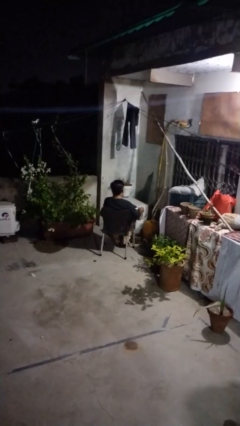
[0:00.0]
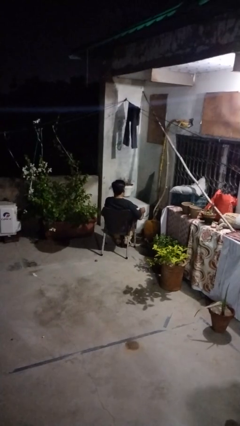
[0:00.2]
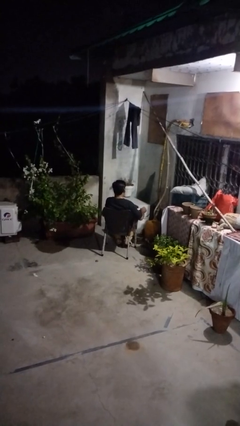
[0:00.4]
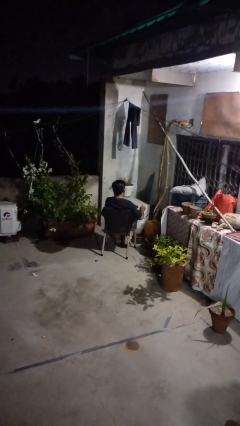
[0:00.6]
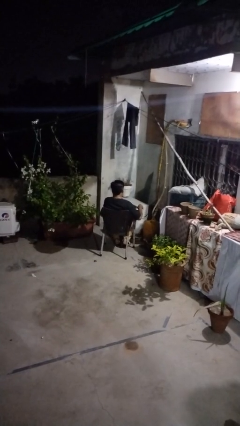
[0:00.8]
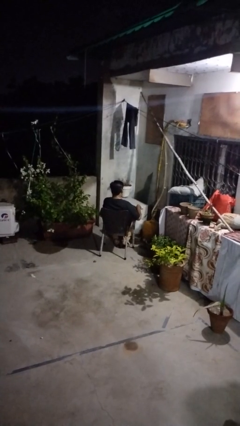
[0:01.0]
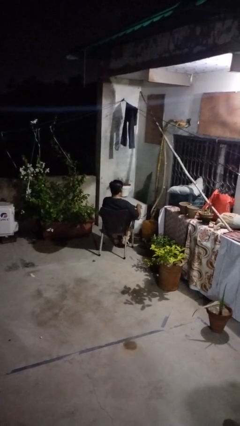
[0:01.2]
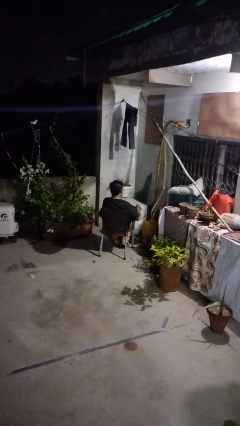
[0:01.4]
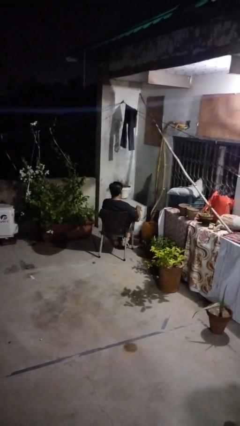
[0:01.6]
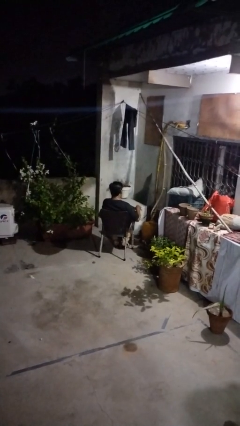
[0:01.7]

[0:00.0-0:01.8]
person stirs mug

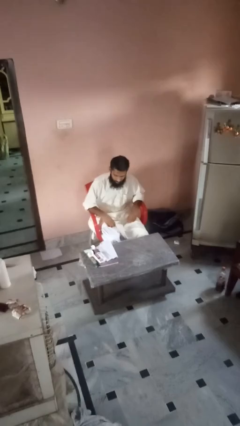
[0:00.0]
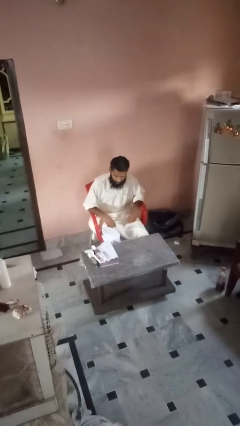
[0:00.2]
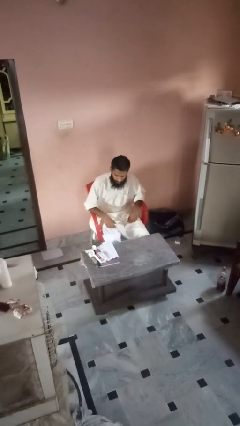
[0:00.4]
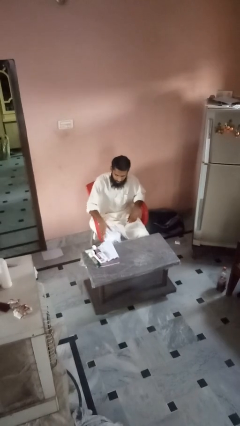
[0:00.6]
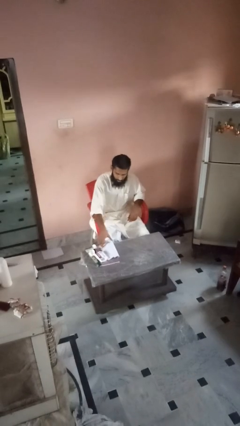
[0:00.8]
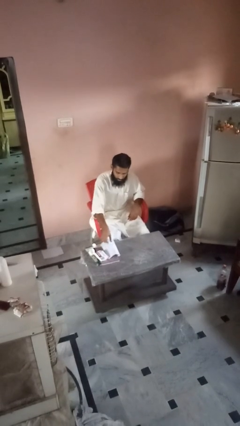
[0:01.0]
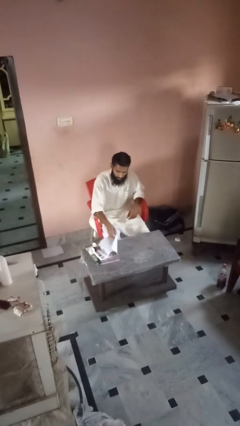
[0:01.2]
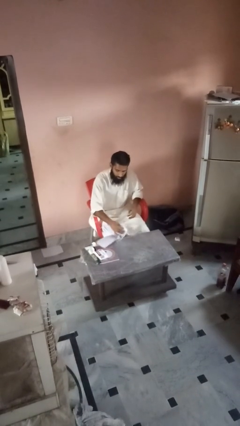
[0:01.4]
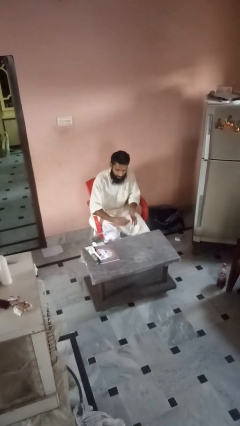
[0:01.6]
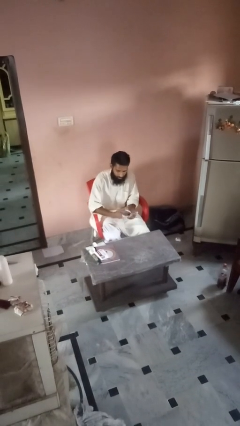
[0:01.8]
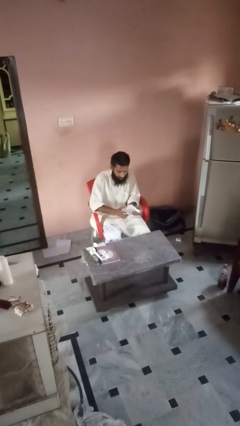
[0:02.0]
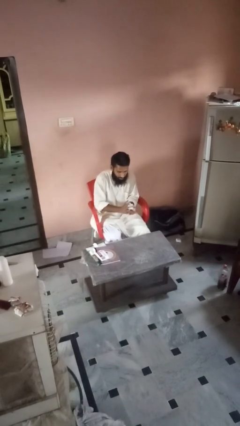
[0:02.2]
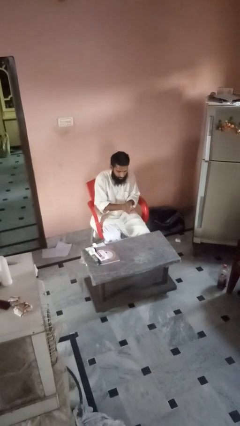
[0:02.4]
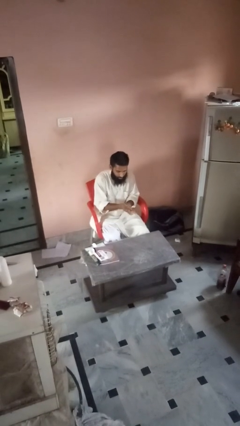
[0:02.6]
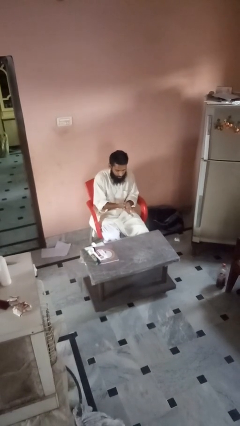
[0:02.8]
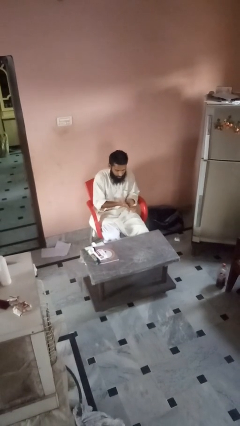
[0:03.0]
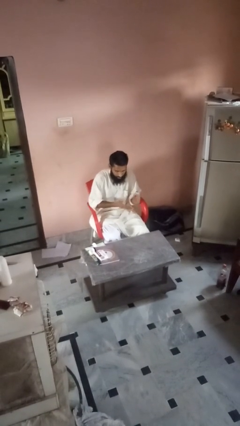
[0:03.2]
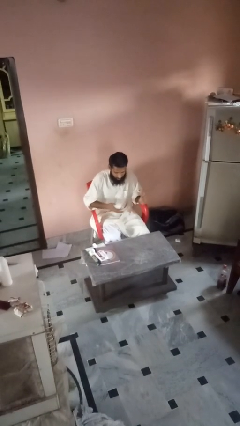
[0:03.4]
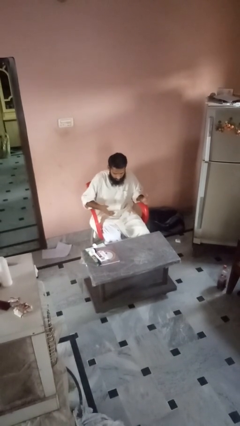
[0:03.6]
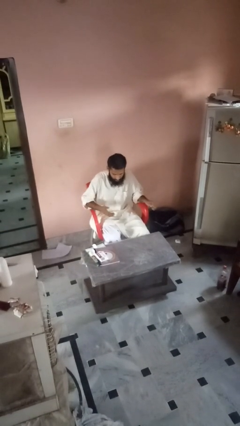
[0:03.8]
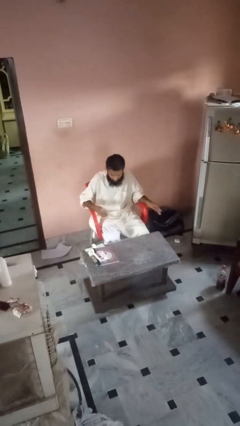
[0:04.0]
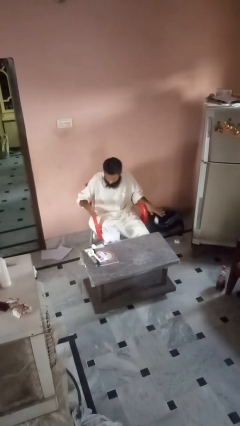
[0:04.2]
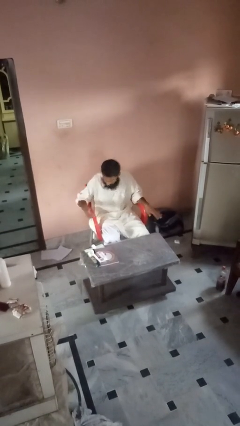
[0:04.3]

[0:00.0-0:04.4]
person crumples paper

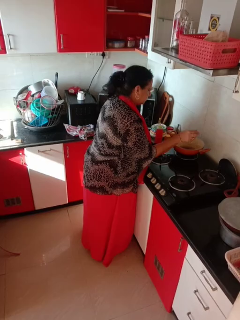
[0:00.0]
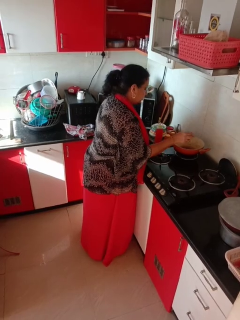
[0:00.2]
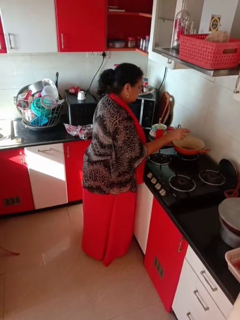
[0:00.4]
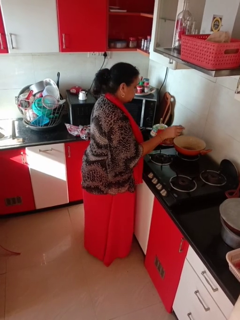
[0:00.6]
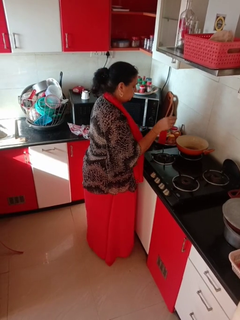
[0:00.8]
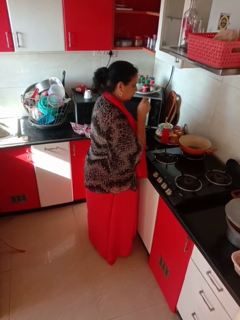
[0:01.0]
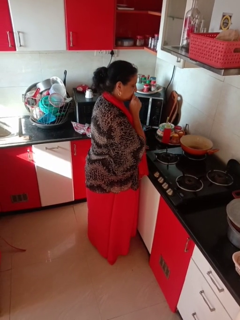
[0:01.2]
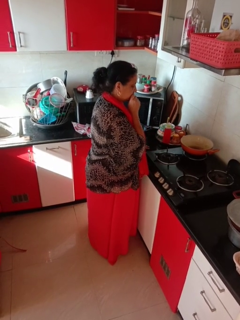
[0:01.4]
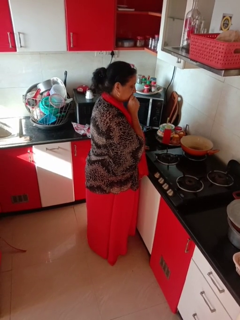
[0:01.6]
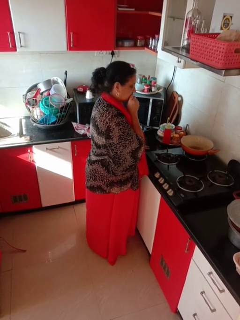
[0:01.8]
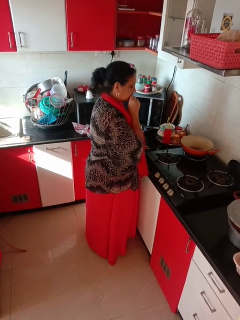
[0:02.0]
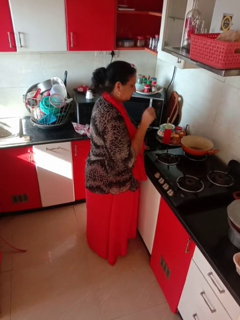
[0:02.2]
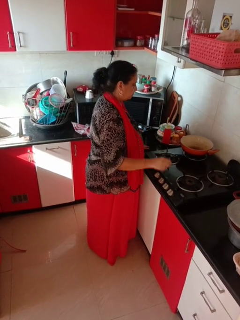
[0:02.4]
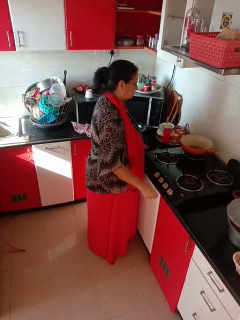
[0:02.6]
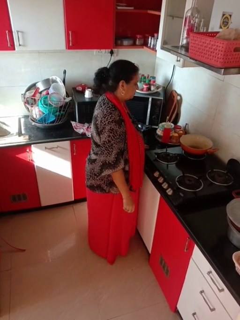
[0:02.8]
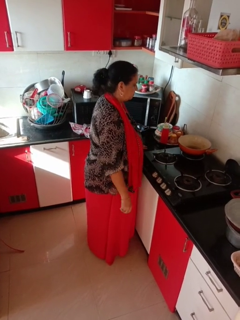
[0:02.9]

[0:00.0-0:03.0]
person burns hand

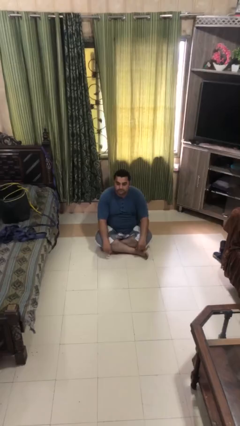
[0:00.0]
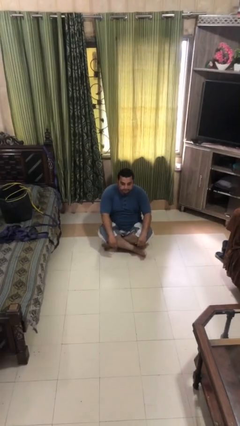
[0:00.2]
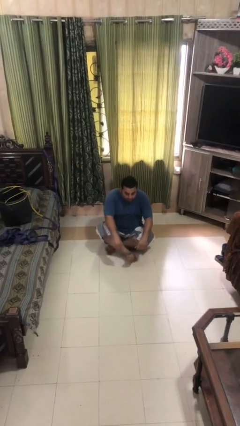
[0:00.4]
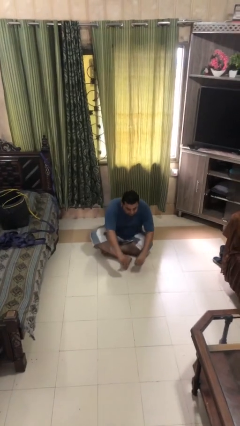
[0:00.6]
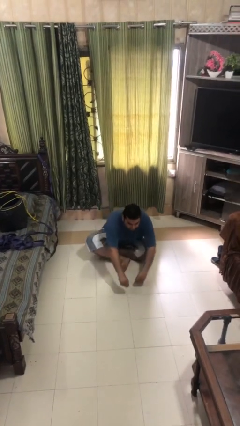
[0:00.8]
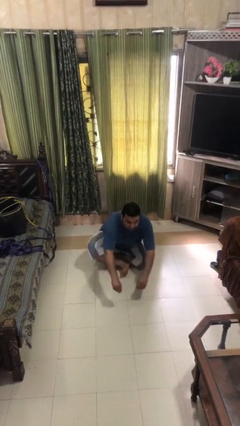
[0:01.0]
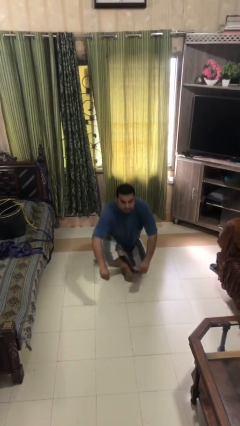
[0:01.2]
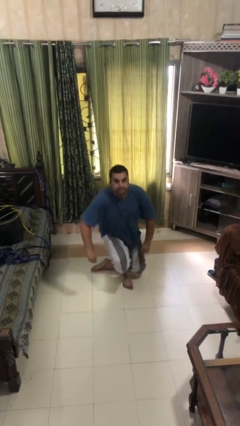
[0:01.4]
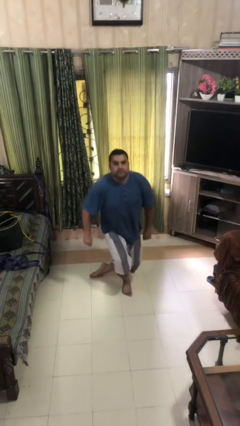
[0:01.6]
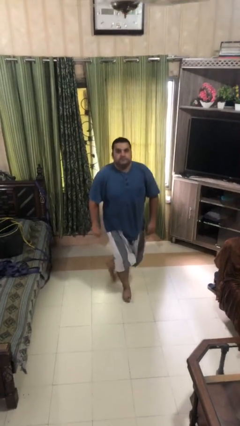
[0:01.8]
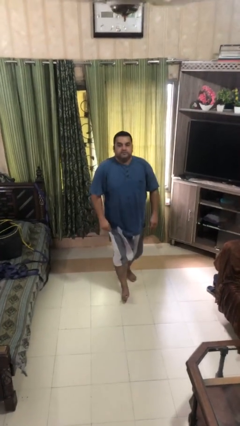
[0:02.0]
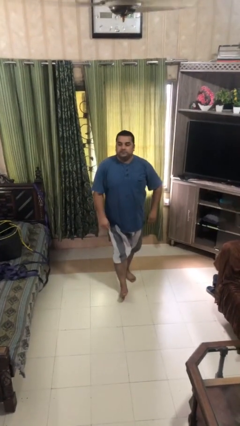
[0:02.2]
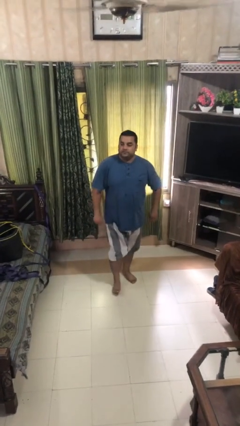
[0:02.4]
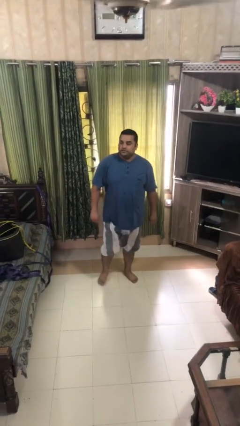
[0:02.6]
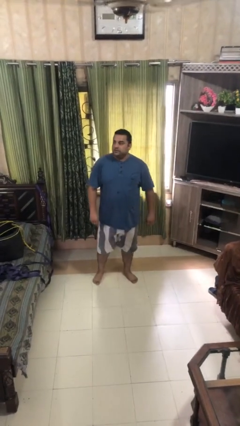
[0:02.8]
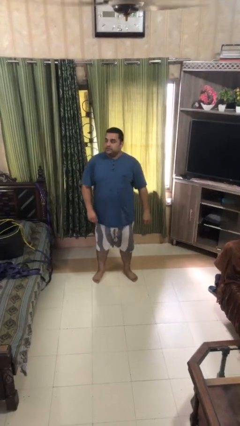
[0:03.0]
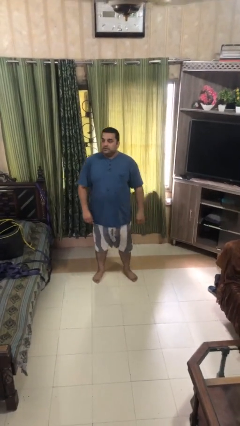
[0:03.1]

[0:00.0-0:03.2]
person stands up from floor

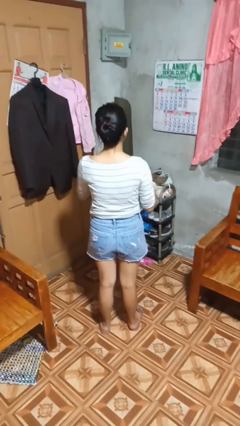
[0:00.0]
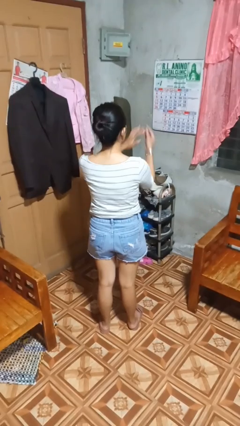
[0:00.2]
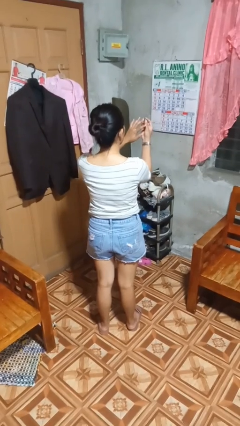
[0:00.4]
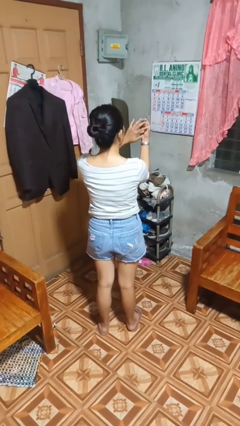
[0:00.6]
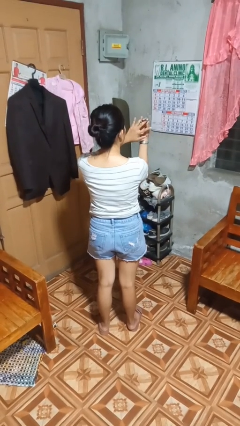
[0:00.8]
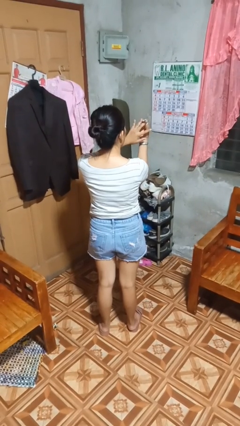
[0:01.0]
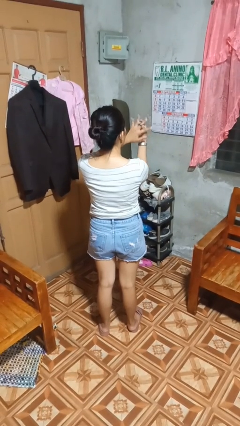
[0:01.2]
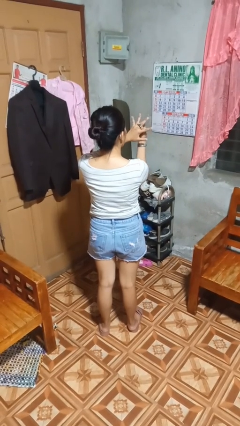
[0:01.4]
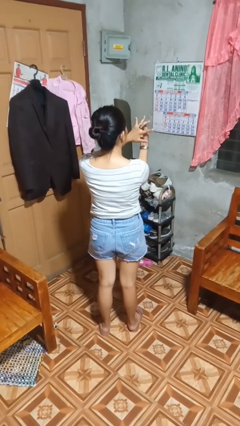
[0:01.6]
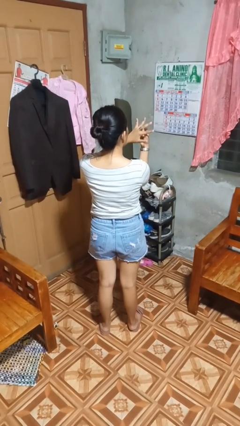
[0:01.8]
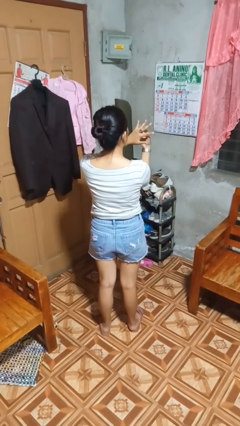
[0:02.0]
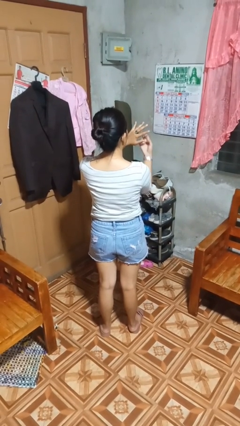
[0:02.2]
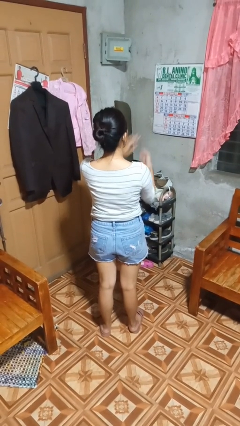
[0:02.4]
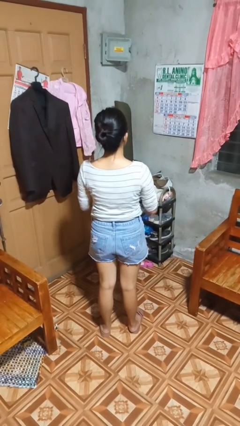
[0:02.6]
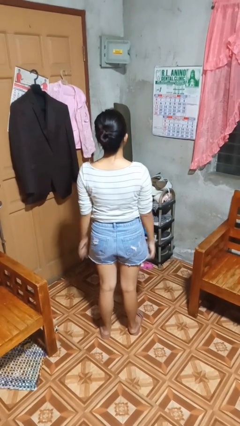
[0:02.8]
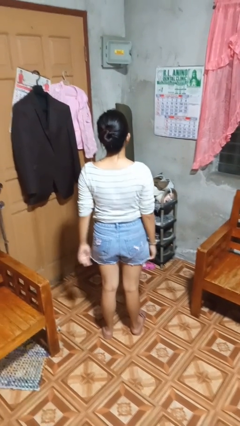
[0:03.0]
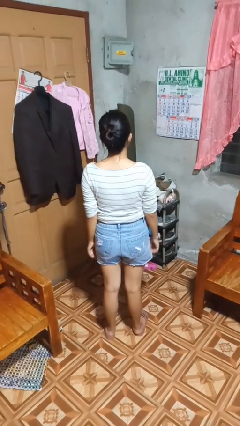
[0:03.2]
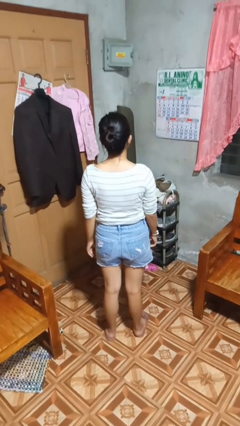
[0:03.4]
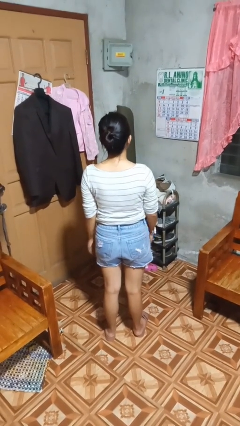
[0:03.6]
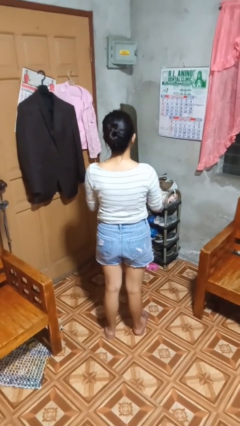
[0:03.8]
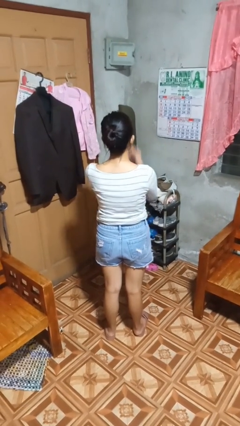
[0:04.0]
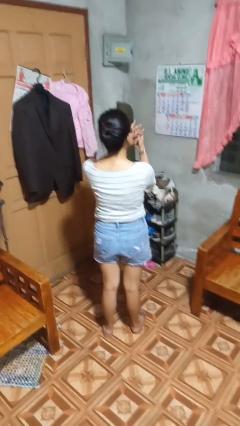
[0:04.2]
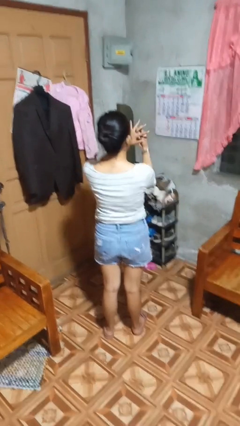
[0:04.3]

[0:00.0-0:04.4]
person puts on ring

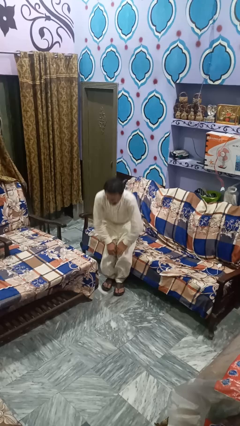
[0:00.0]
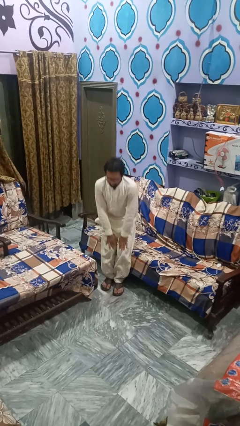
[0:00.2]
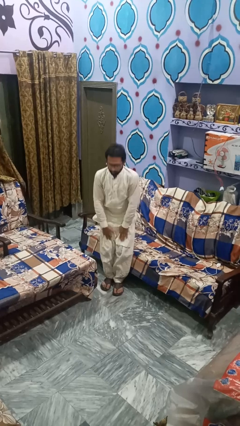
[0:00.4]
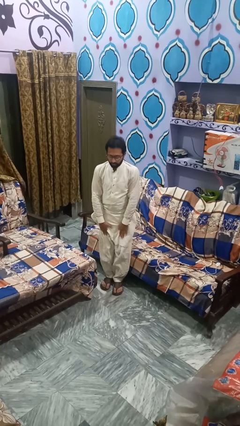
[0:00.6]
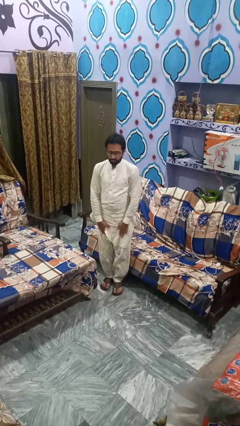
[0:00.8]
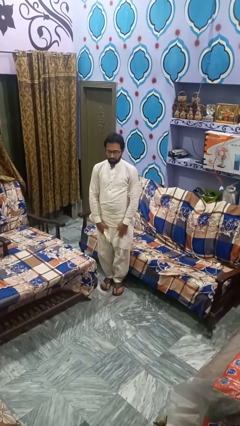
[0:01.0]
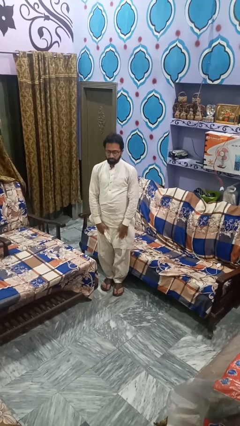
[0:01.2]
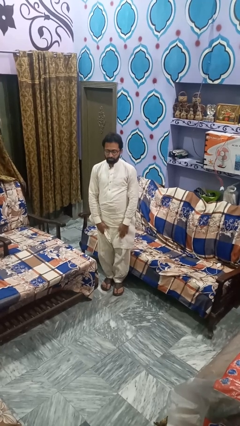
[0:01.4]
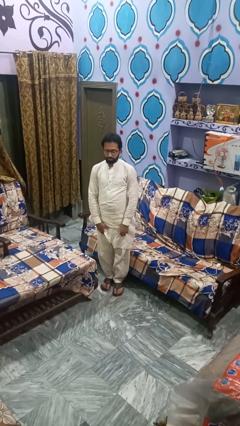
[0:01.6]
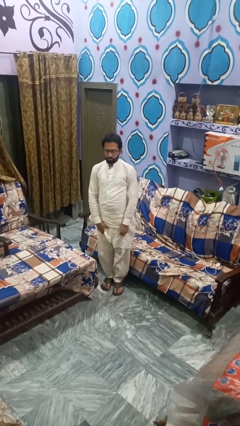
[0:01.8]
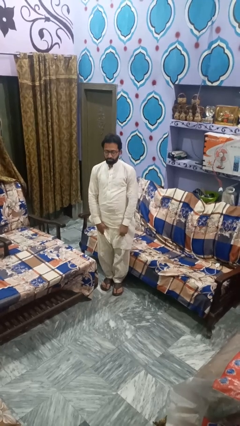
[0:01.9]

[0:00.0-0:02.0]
person stands up
